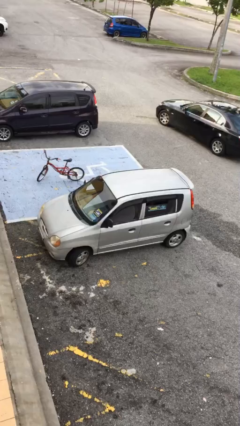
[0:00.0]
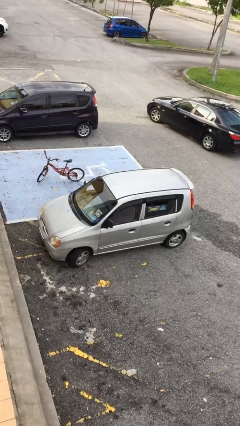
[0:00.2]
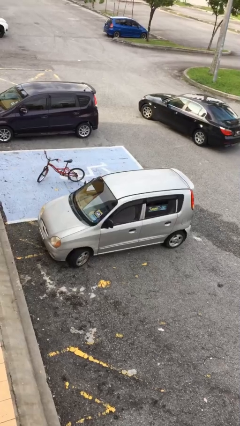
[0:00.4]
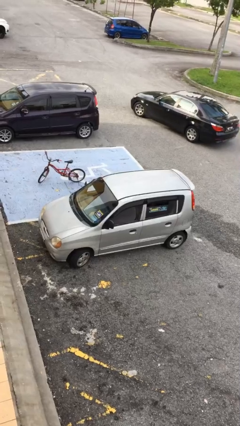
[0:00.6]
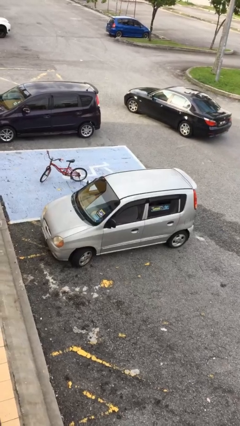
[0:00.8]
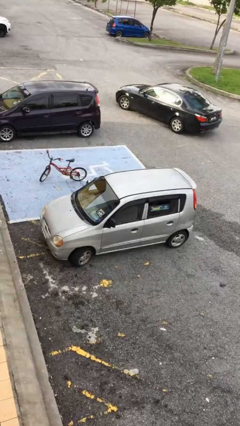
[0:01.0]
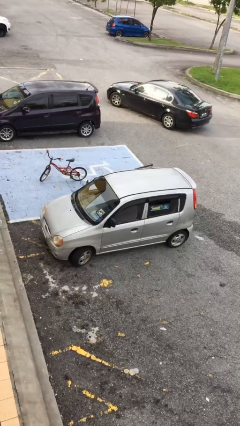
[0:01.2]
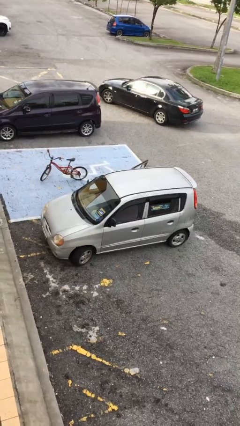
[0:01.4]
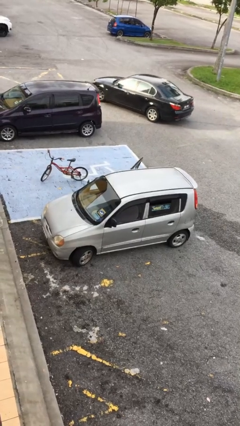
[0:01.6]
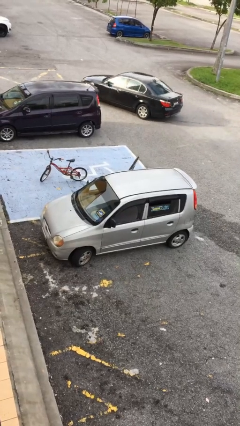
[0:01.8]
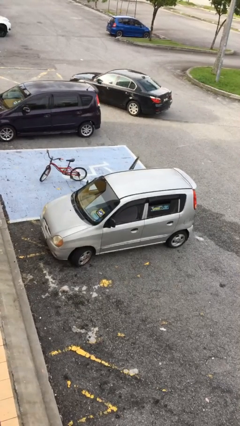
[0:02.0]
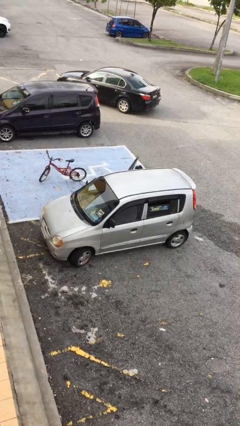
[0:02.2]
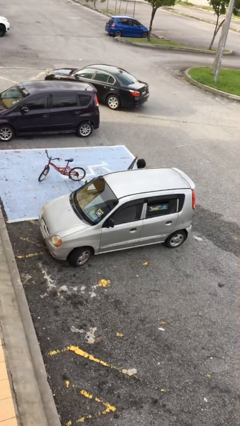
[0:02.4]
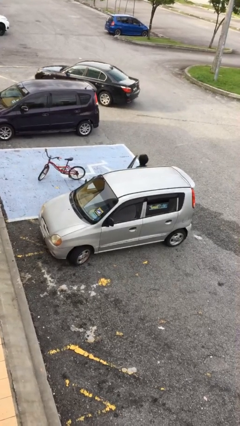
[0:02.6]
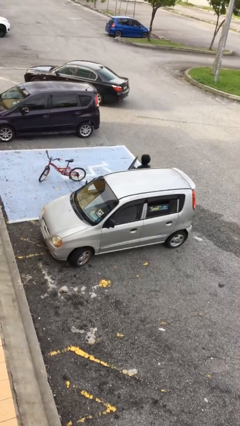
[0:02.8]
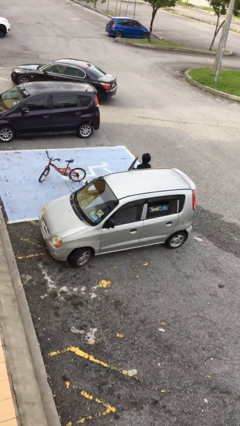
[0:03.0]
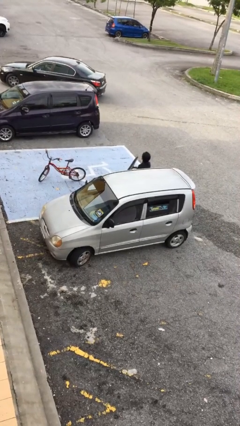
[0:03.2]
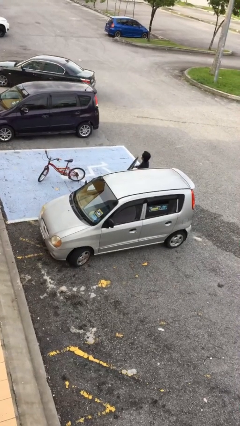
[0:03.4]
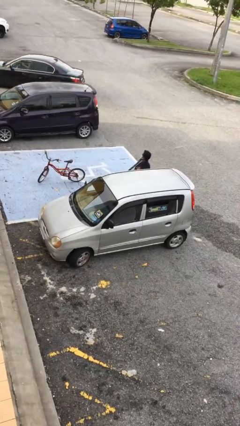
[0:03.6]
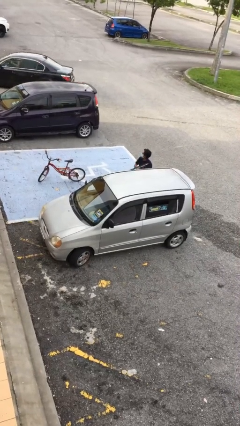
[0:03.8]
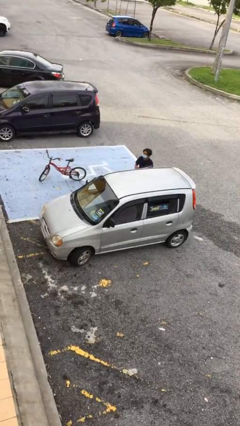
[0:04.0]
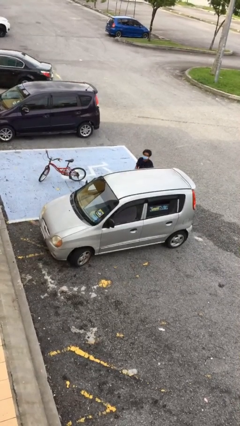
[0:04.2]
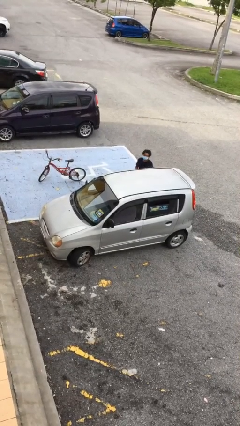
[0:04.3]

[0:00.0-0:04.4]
car drops off person

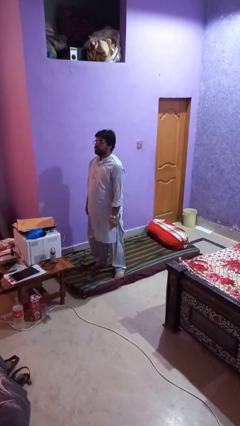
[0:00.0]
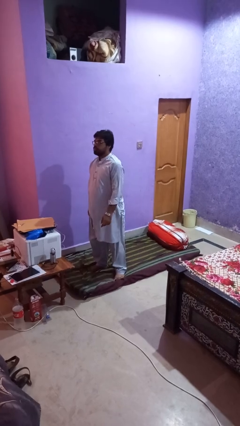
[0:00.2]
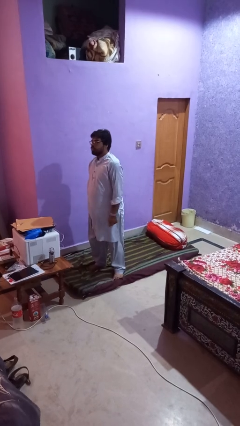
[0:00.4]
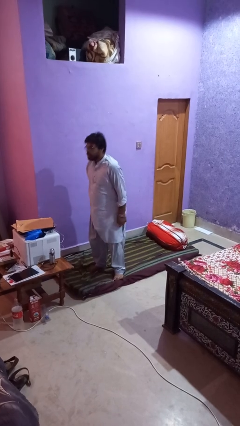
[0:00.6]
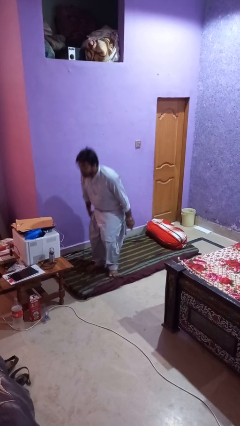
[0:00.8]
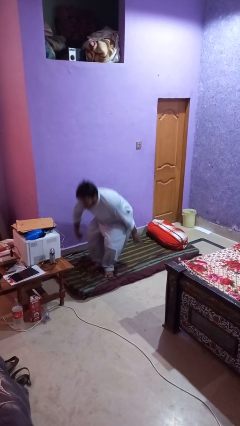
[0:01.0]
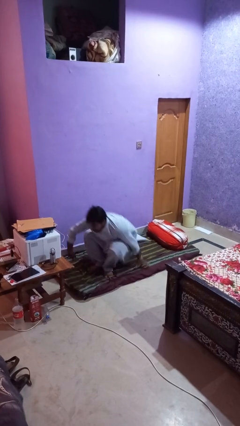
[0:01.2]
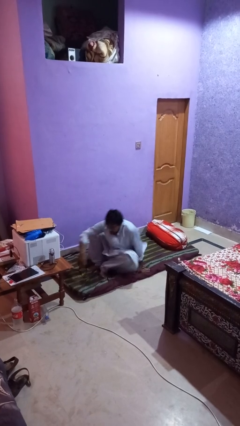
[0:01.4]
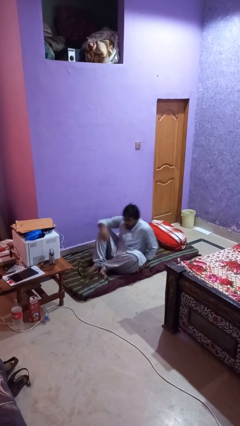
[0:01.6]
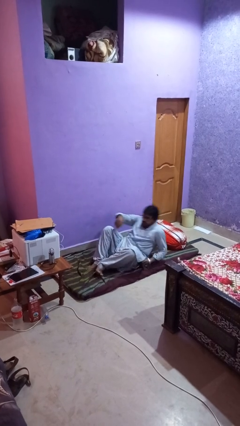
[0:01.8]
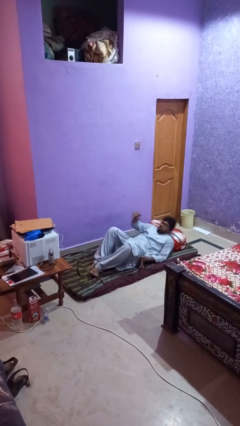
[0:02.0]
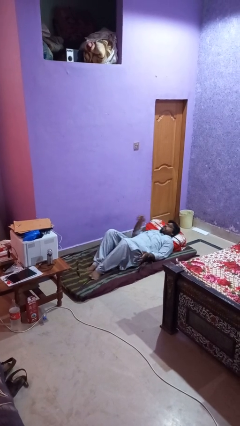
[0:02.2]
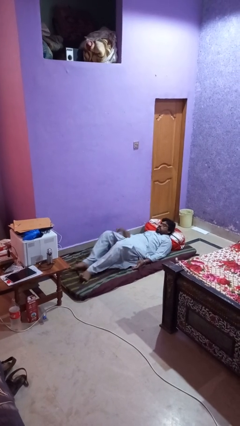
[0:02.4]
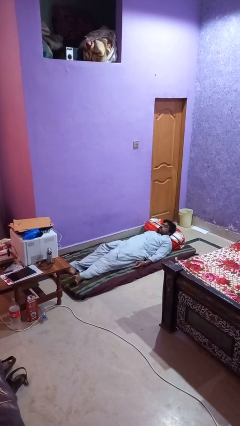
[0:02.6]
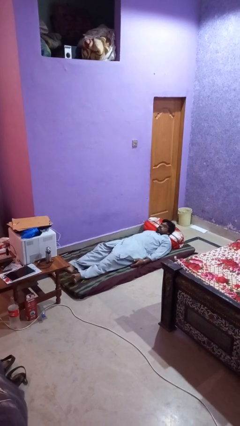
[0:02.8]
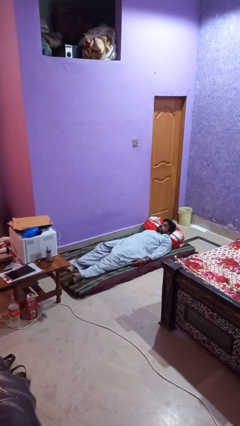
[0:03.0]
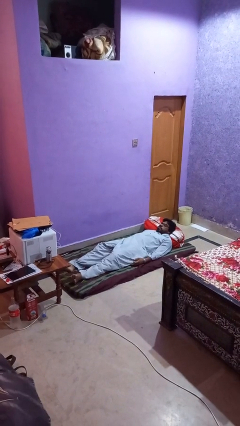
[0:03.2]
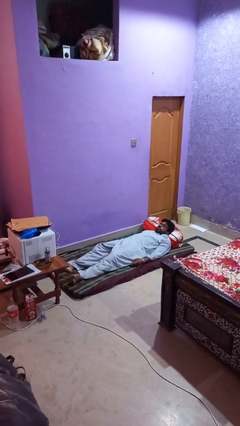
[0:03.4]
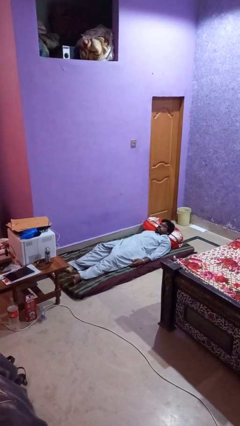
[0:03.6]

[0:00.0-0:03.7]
person lies down on bed

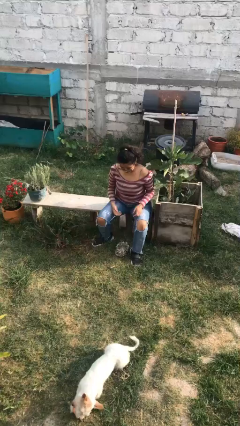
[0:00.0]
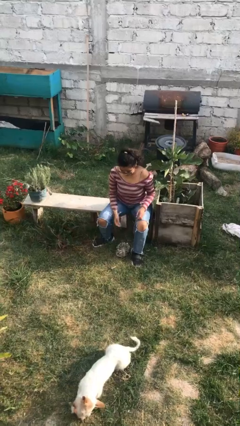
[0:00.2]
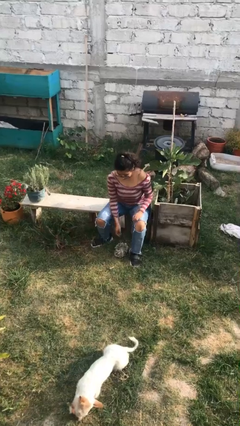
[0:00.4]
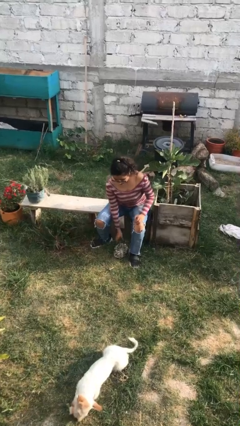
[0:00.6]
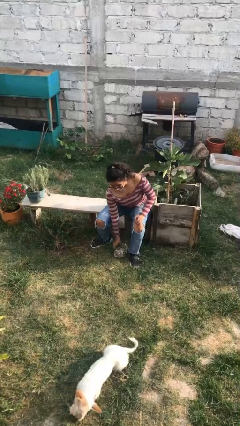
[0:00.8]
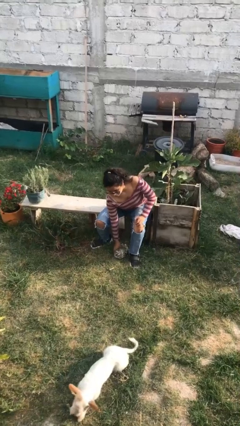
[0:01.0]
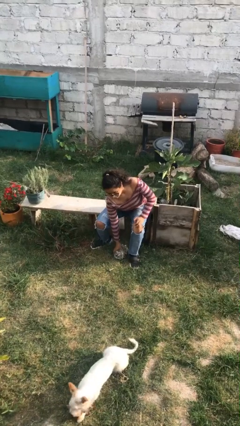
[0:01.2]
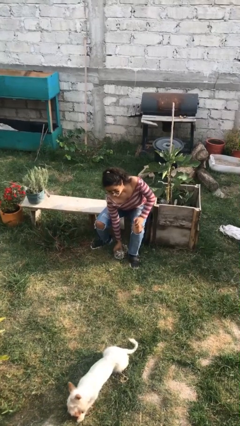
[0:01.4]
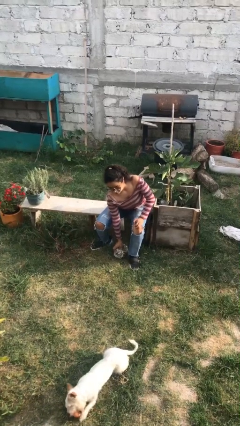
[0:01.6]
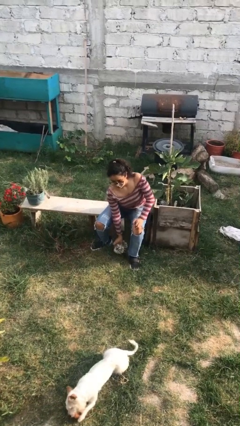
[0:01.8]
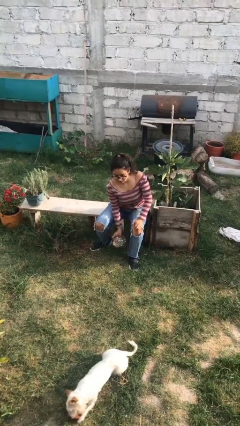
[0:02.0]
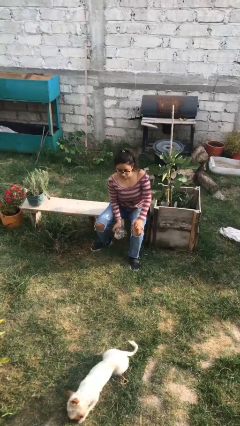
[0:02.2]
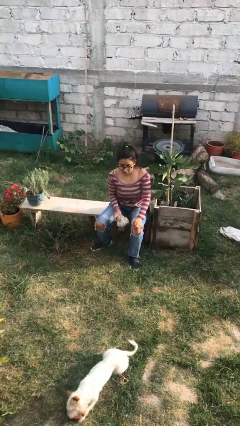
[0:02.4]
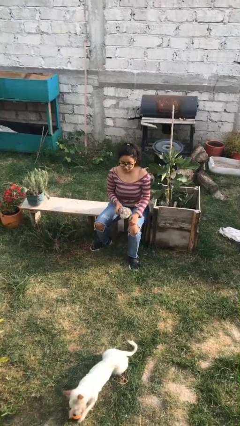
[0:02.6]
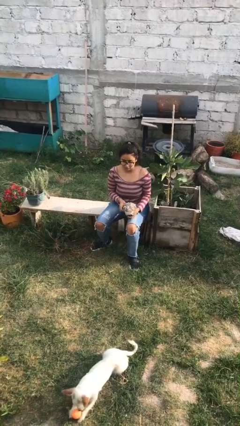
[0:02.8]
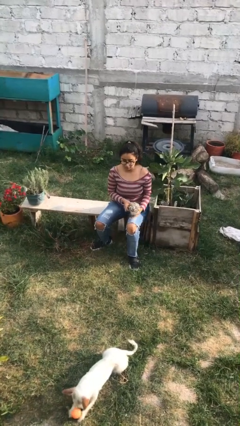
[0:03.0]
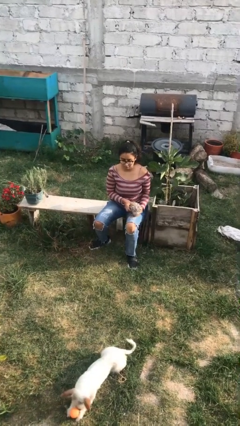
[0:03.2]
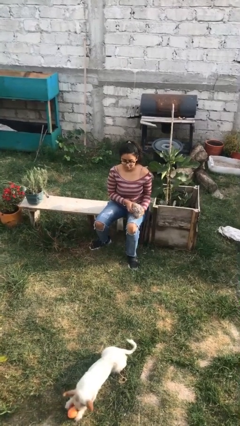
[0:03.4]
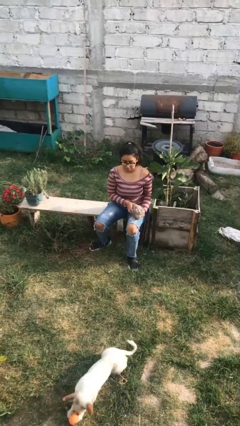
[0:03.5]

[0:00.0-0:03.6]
person picks up object from floor

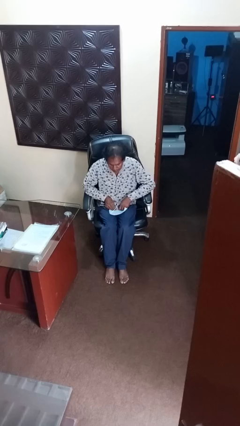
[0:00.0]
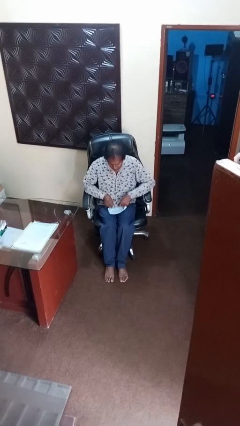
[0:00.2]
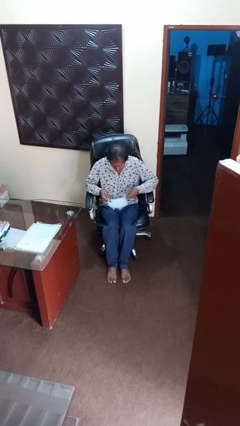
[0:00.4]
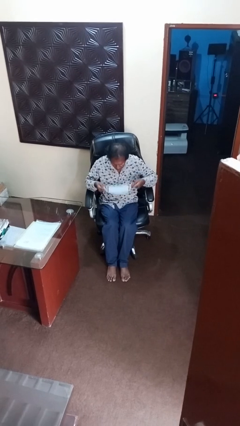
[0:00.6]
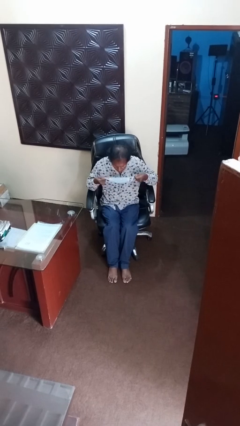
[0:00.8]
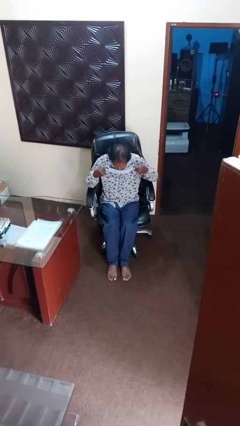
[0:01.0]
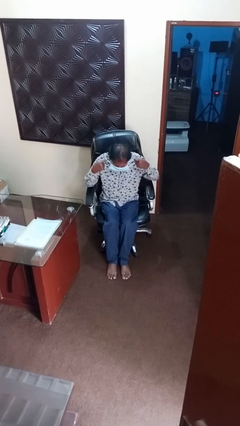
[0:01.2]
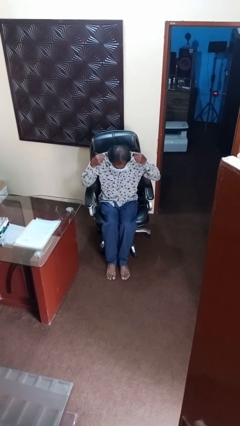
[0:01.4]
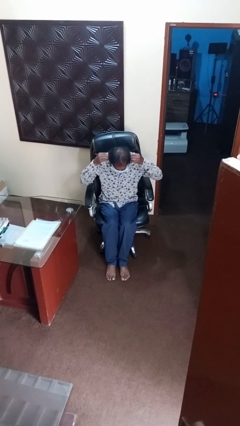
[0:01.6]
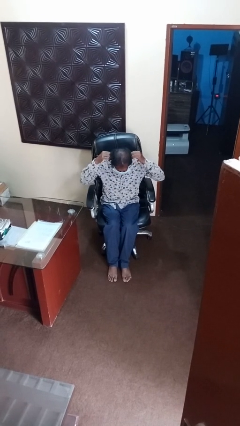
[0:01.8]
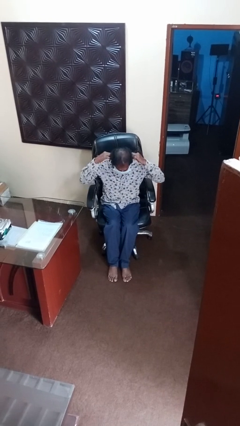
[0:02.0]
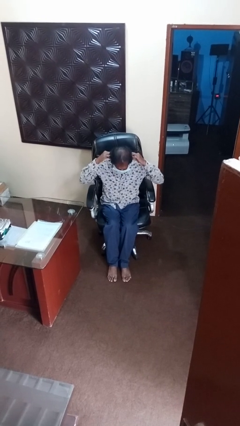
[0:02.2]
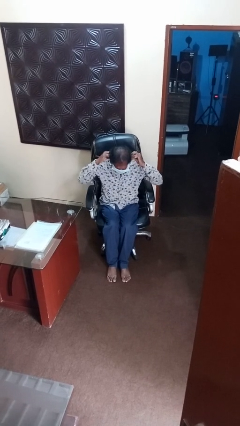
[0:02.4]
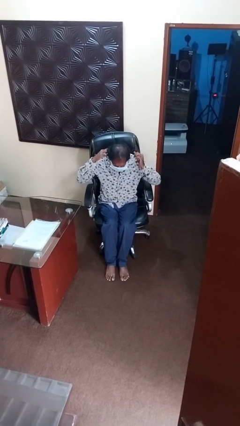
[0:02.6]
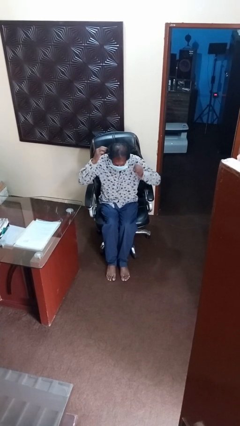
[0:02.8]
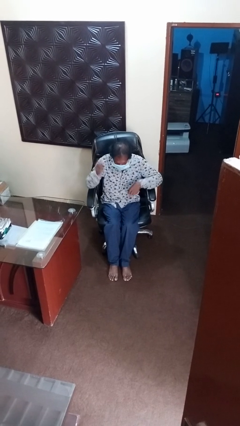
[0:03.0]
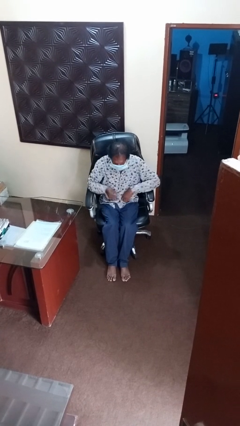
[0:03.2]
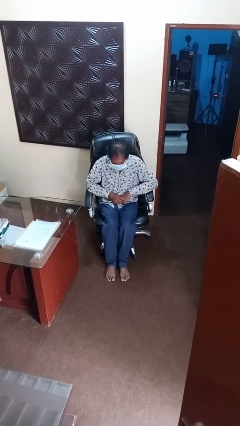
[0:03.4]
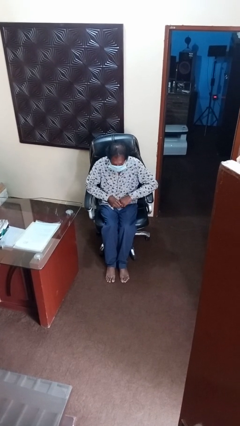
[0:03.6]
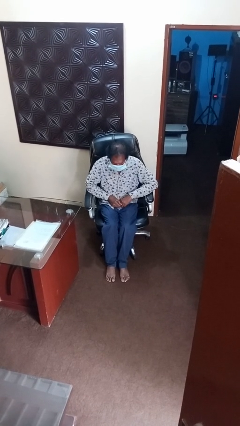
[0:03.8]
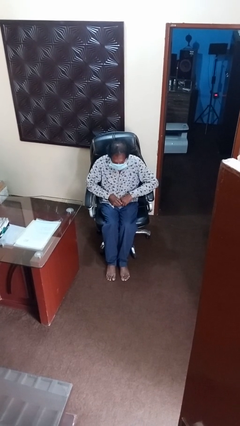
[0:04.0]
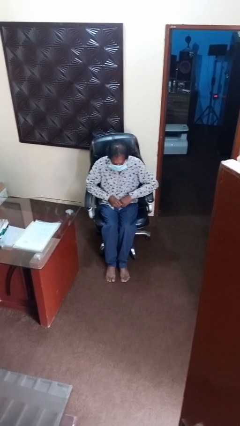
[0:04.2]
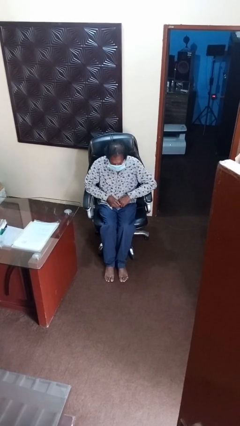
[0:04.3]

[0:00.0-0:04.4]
person puts on facemask

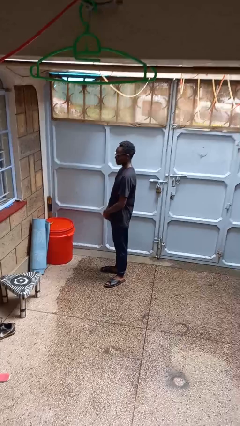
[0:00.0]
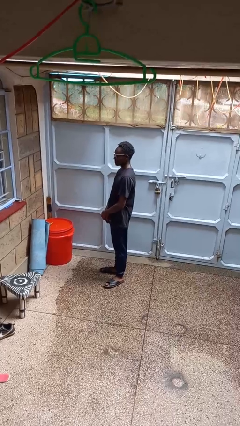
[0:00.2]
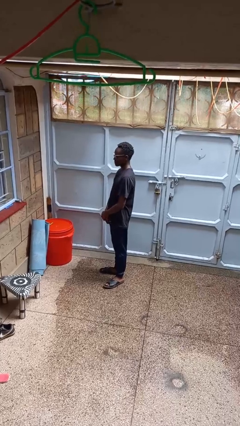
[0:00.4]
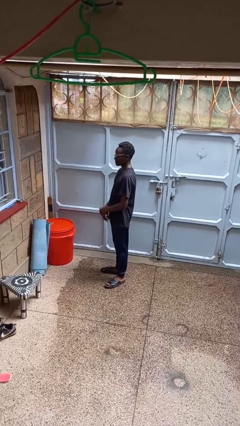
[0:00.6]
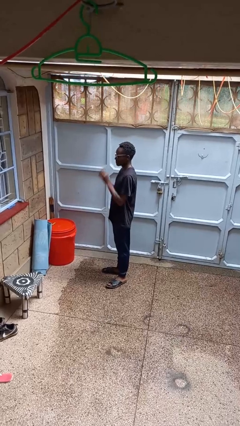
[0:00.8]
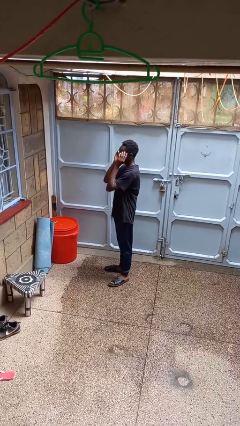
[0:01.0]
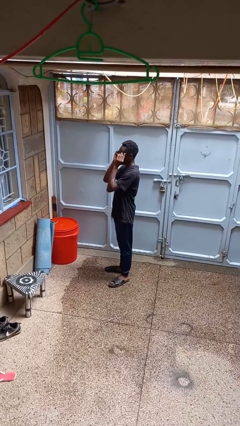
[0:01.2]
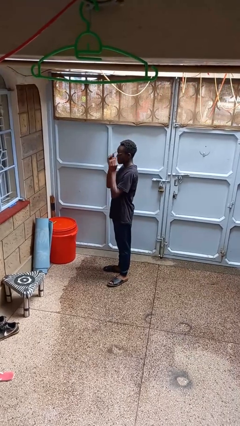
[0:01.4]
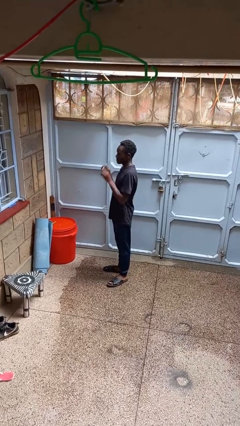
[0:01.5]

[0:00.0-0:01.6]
person takes off glasses
